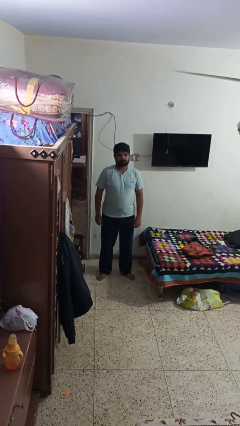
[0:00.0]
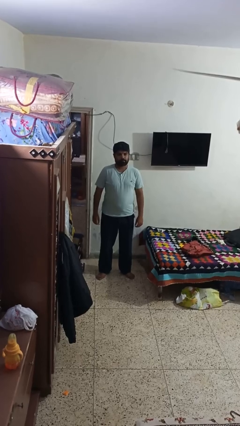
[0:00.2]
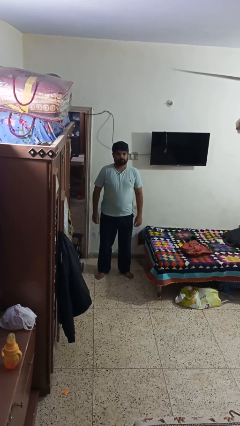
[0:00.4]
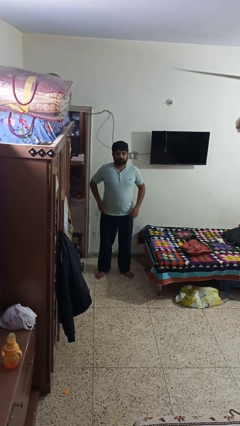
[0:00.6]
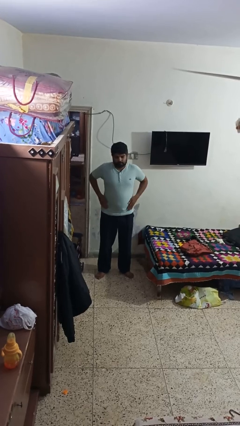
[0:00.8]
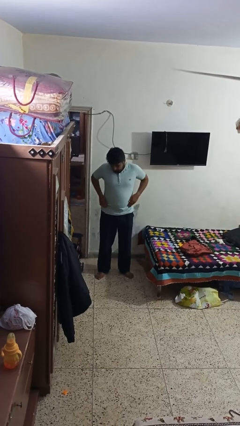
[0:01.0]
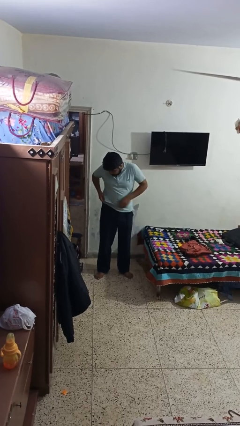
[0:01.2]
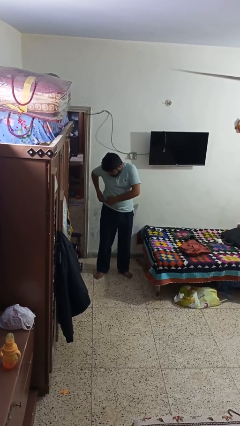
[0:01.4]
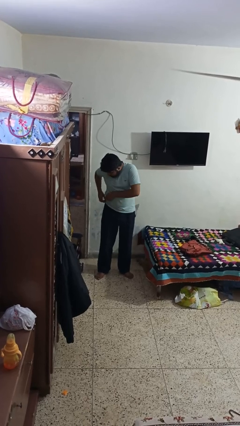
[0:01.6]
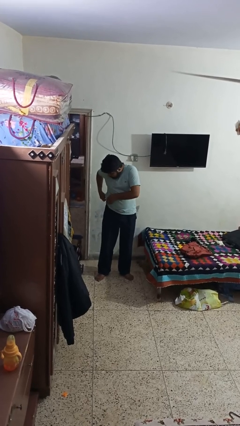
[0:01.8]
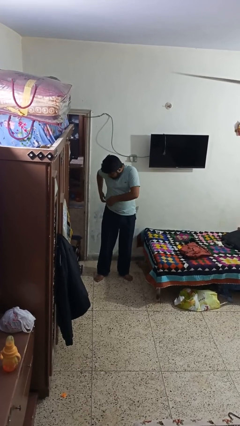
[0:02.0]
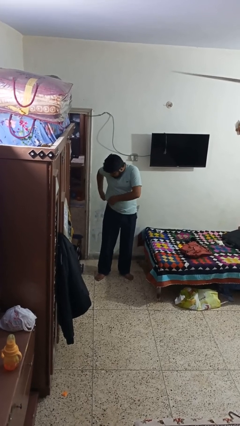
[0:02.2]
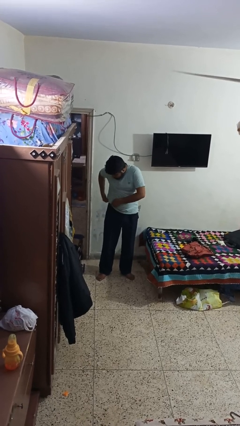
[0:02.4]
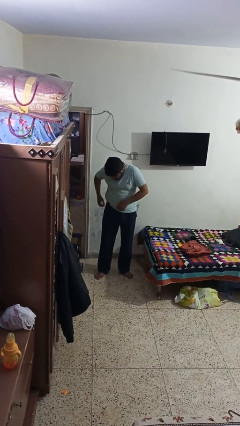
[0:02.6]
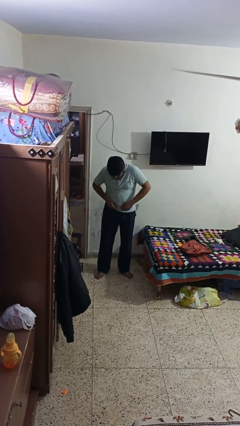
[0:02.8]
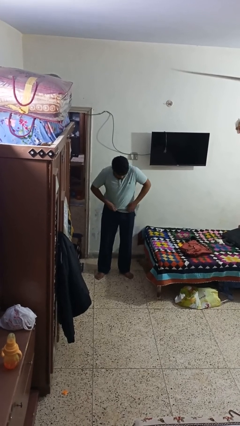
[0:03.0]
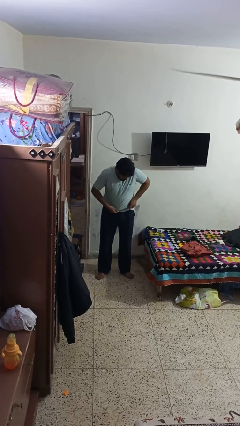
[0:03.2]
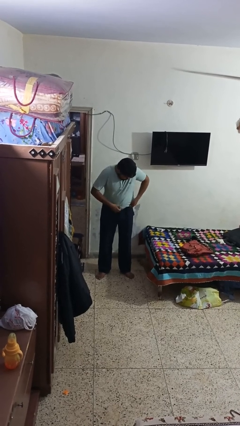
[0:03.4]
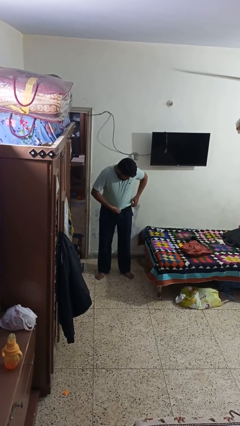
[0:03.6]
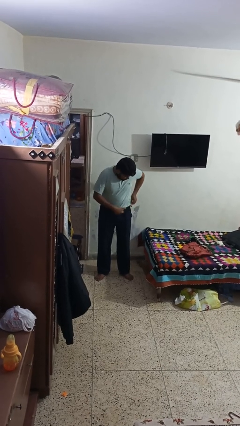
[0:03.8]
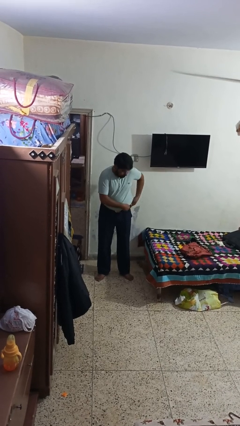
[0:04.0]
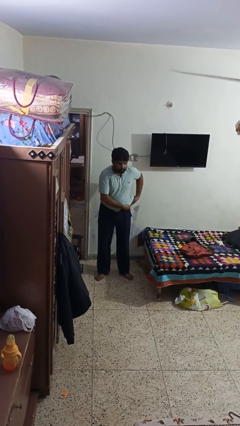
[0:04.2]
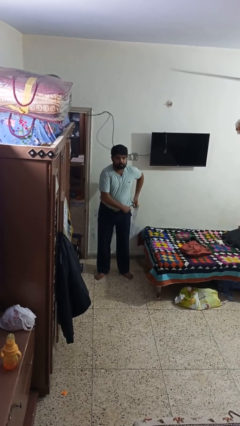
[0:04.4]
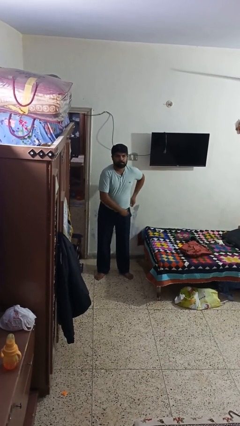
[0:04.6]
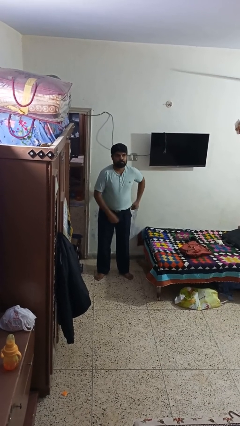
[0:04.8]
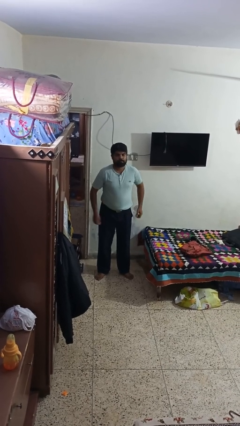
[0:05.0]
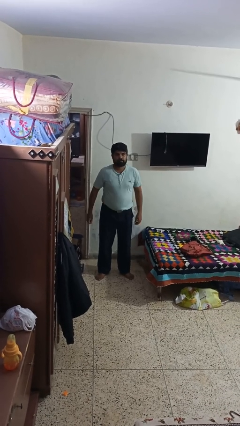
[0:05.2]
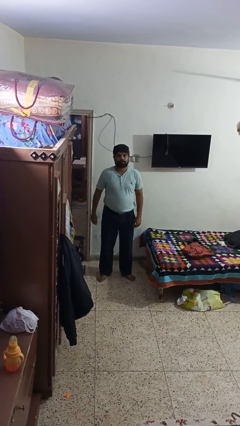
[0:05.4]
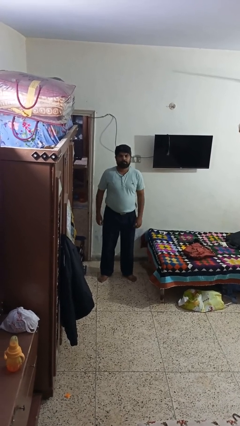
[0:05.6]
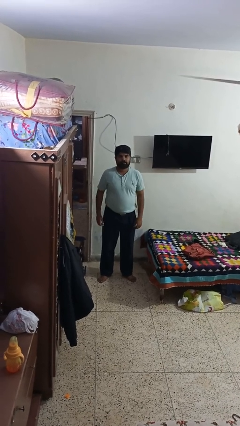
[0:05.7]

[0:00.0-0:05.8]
person tucks in shirt

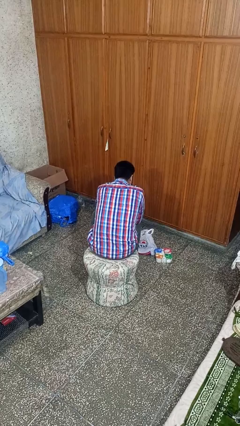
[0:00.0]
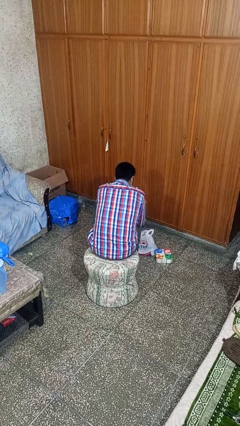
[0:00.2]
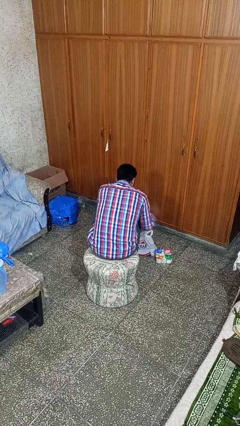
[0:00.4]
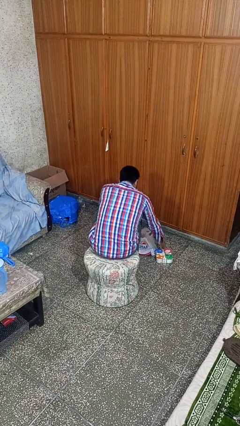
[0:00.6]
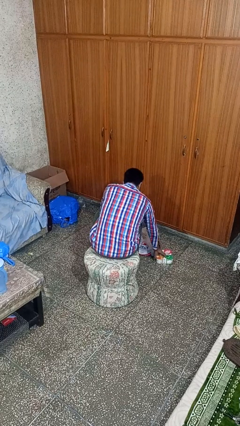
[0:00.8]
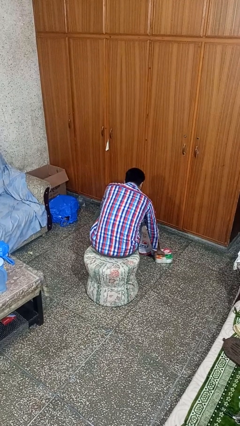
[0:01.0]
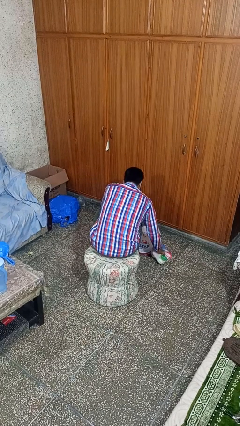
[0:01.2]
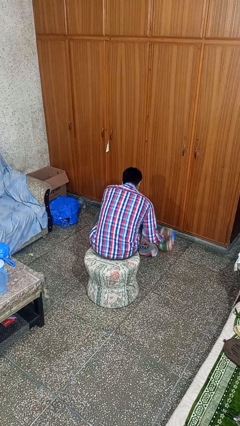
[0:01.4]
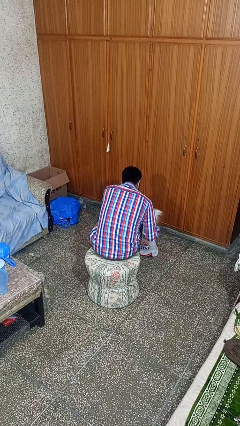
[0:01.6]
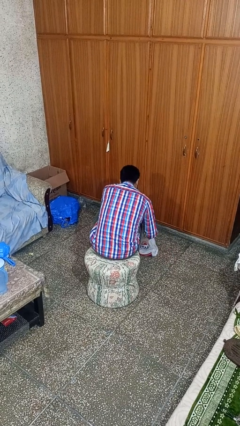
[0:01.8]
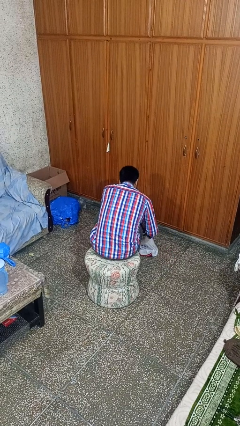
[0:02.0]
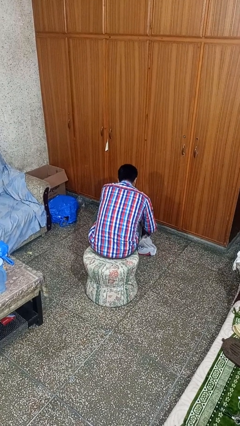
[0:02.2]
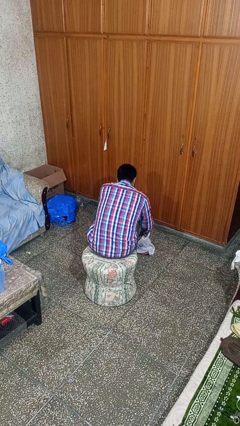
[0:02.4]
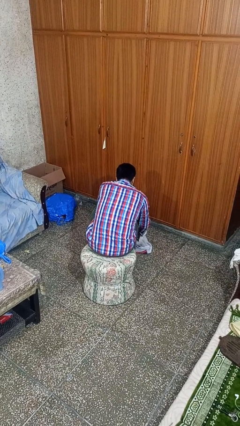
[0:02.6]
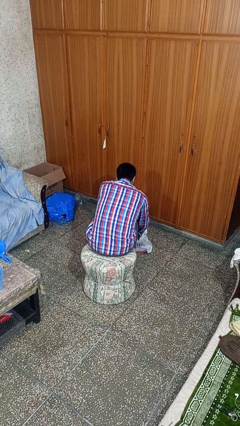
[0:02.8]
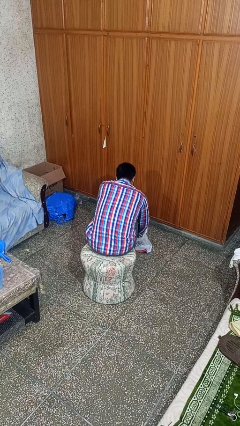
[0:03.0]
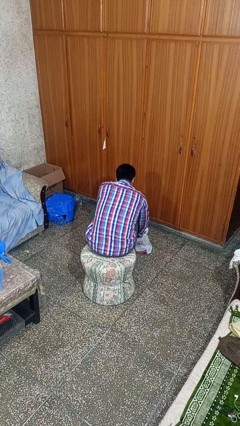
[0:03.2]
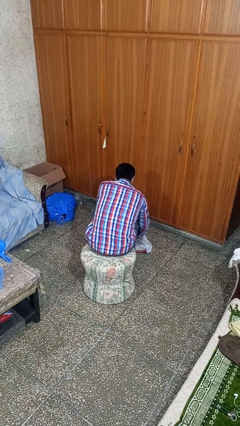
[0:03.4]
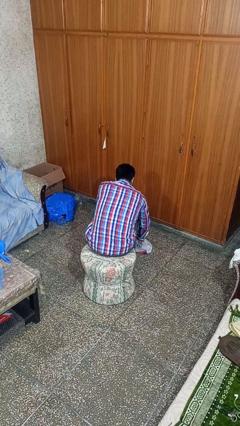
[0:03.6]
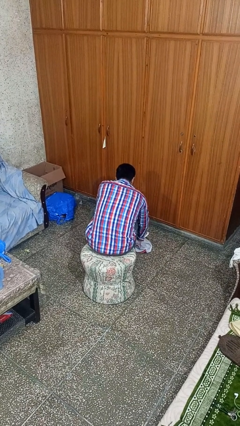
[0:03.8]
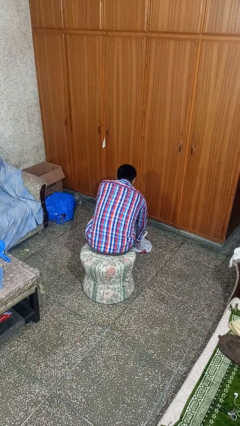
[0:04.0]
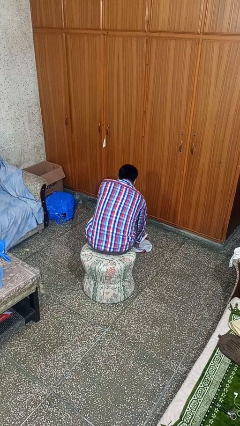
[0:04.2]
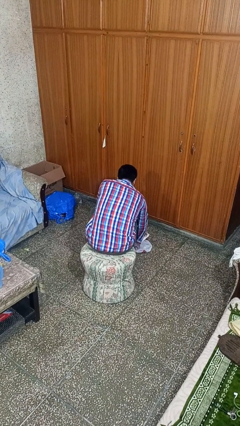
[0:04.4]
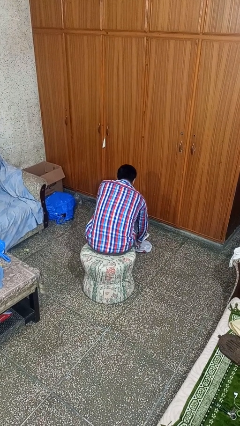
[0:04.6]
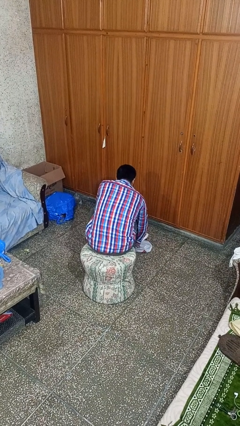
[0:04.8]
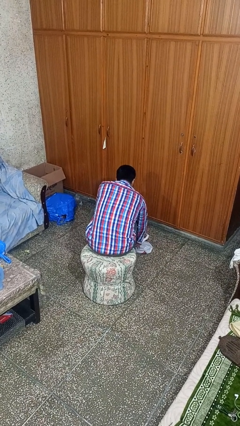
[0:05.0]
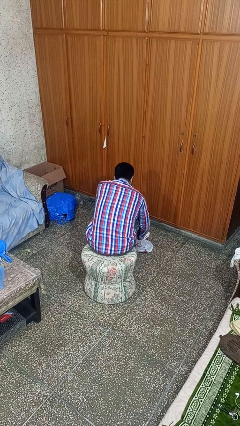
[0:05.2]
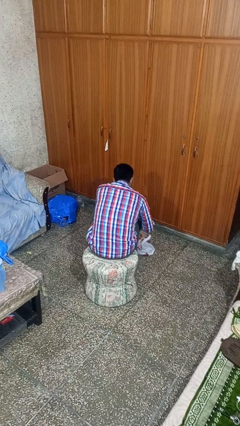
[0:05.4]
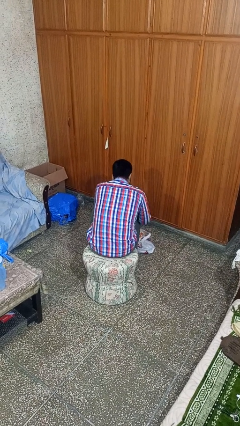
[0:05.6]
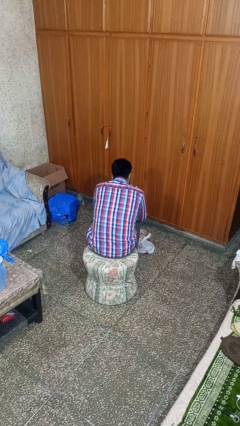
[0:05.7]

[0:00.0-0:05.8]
person puts object into bag

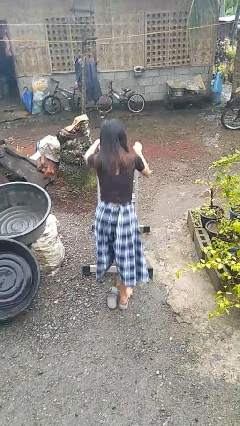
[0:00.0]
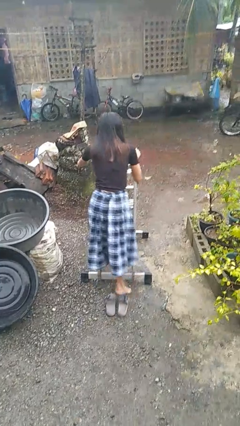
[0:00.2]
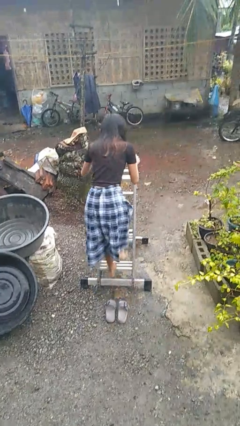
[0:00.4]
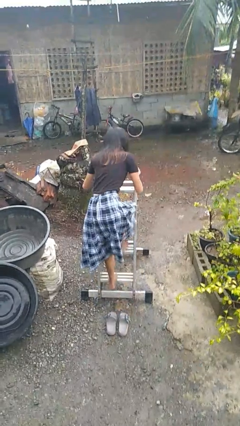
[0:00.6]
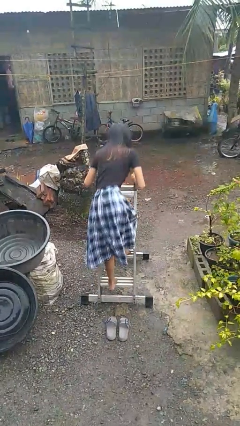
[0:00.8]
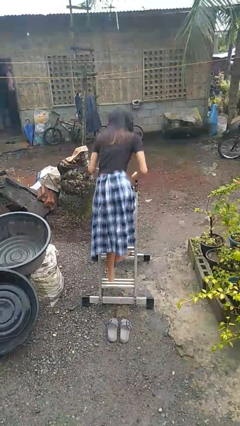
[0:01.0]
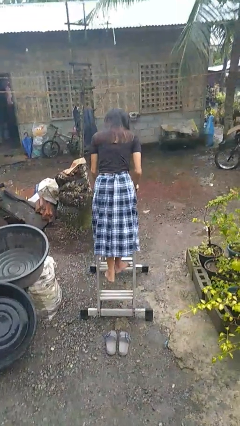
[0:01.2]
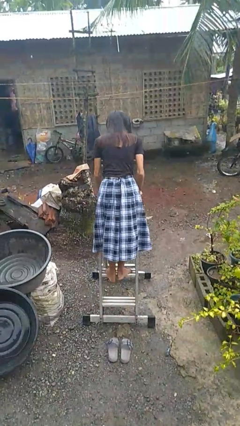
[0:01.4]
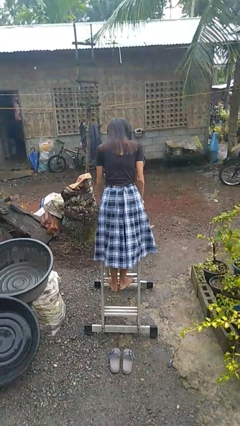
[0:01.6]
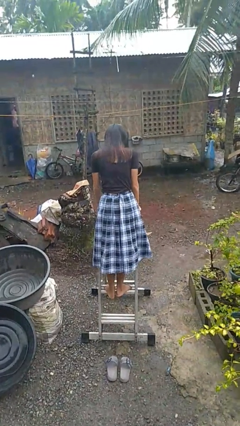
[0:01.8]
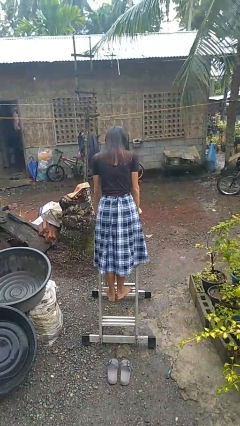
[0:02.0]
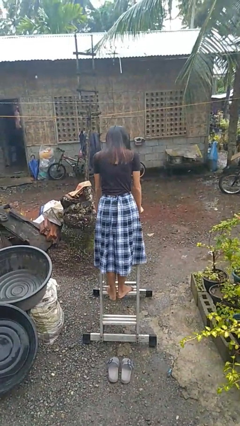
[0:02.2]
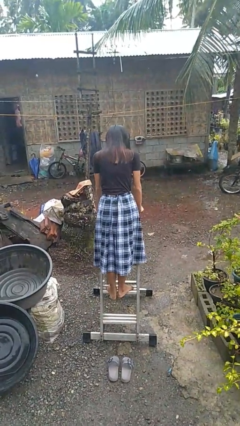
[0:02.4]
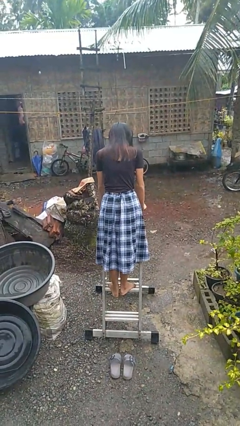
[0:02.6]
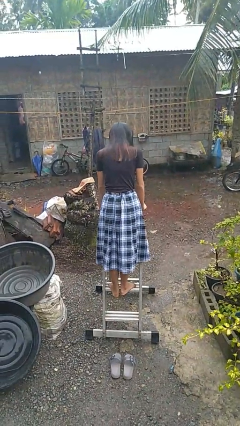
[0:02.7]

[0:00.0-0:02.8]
person climbs up ladder

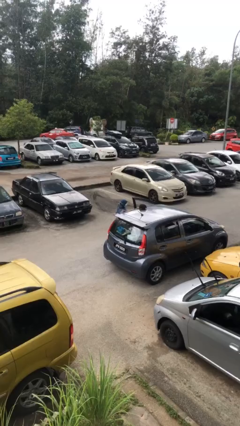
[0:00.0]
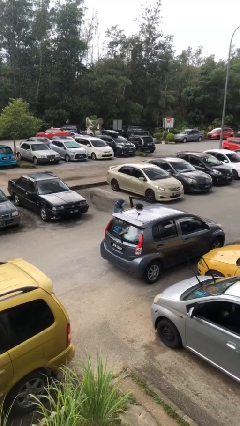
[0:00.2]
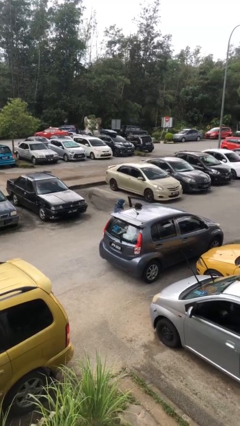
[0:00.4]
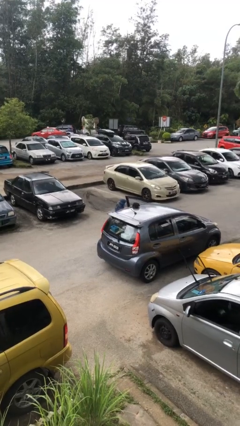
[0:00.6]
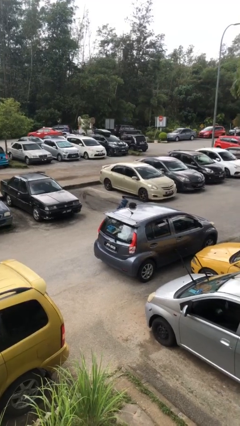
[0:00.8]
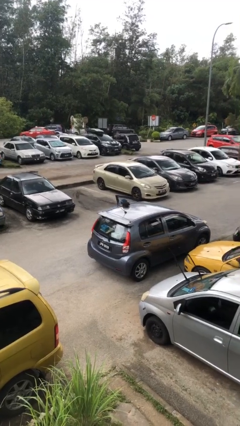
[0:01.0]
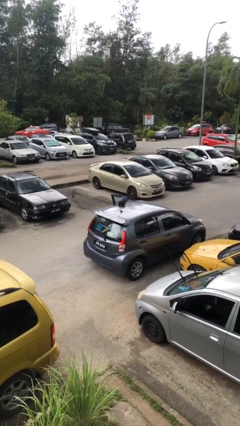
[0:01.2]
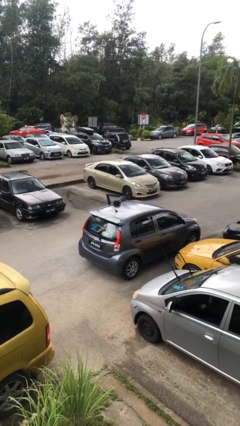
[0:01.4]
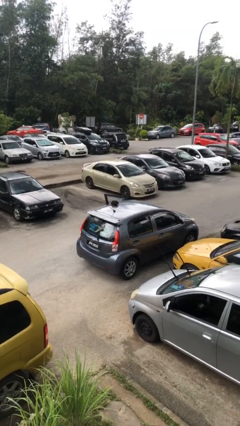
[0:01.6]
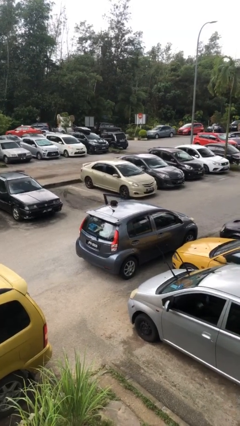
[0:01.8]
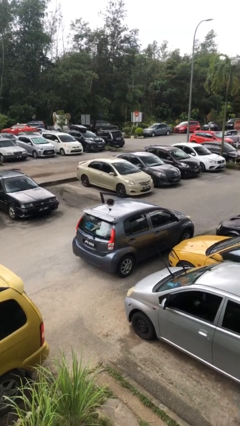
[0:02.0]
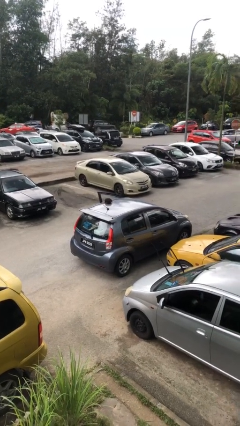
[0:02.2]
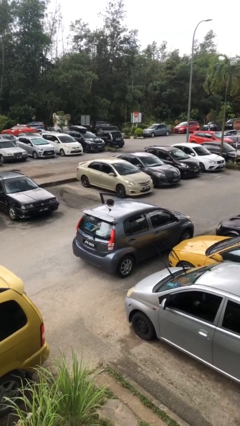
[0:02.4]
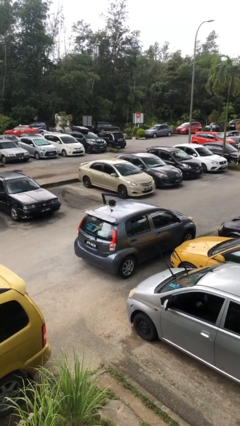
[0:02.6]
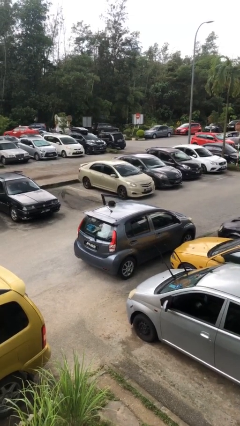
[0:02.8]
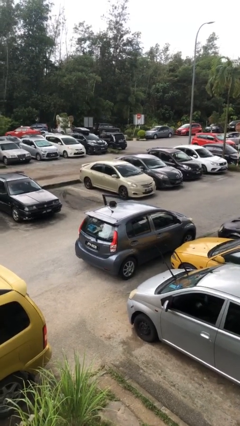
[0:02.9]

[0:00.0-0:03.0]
person enters car

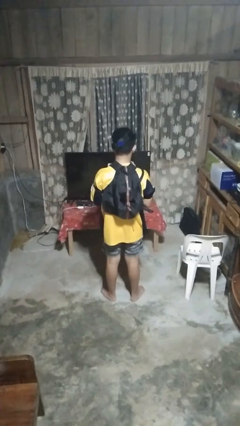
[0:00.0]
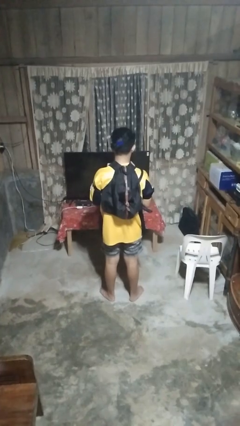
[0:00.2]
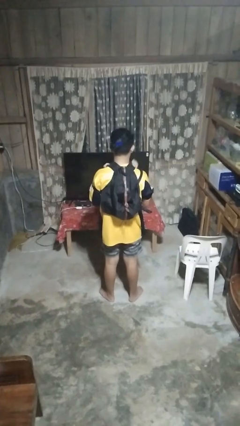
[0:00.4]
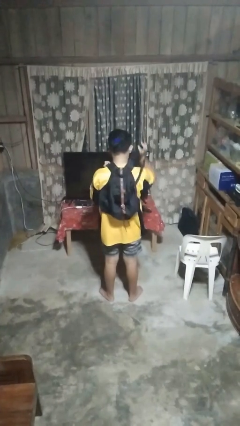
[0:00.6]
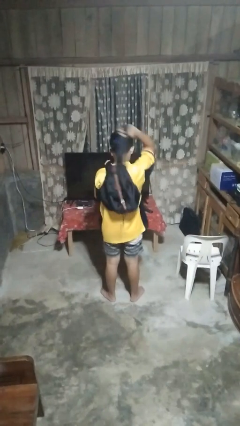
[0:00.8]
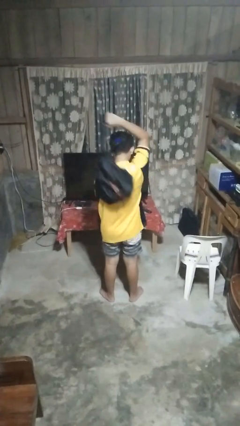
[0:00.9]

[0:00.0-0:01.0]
person takes off backpack
